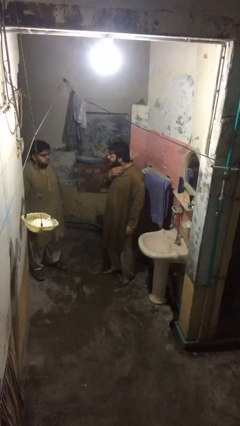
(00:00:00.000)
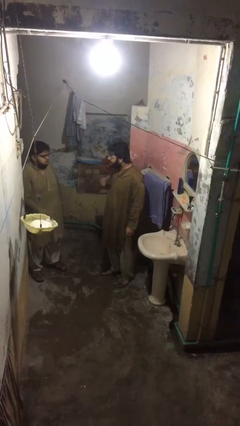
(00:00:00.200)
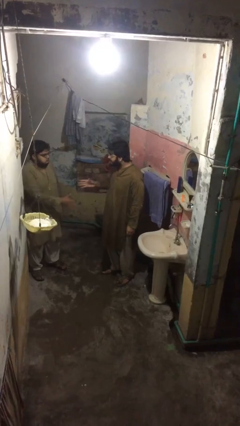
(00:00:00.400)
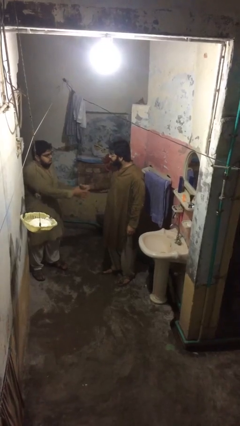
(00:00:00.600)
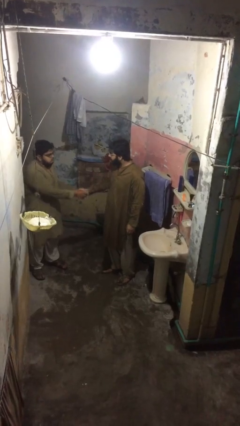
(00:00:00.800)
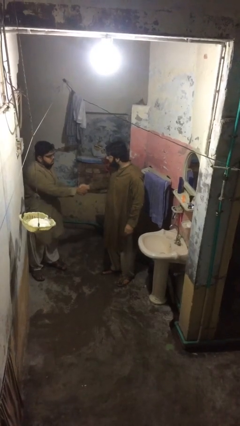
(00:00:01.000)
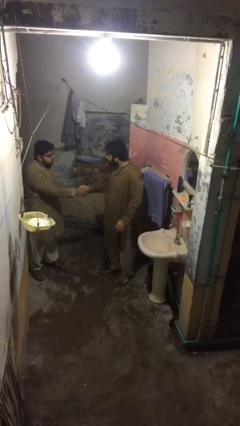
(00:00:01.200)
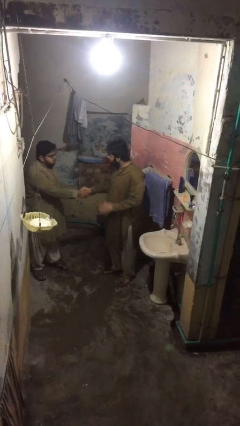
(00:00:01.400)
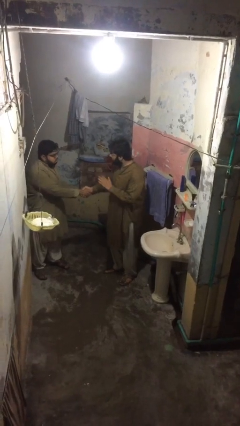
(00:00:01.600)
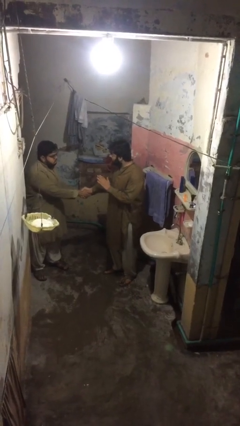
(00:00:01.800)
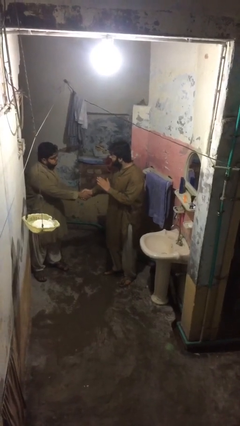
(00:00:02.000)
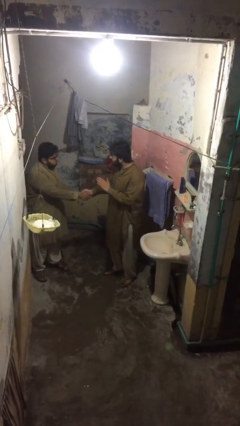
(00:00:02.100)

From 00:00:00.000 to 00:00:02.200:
person shakes hand

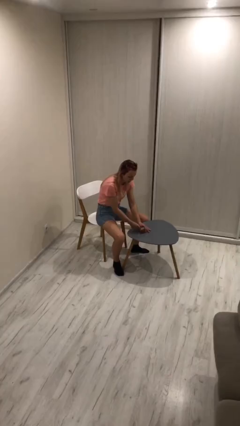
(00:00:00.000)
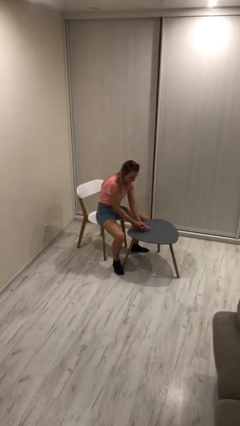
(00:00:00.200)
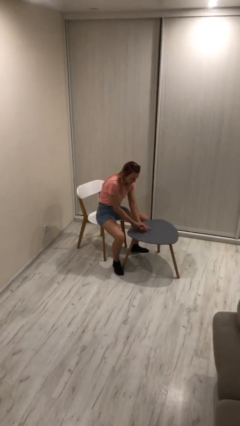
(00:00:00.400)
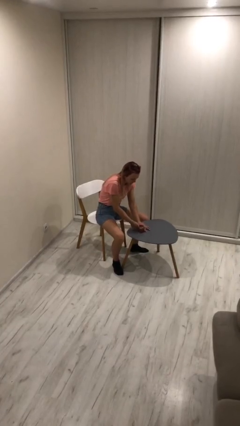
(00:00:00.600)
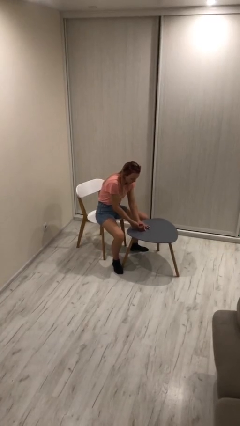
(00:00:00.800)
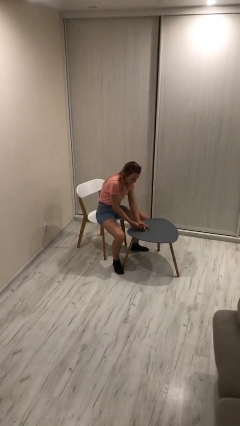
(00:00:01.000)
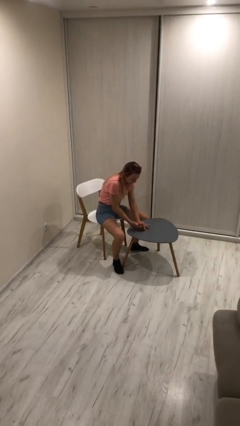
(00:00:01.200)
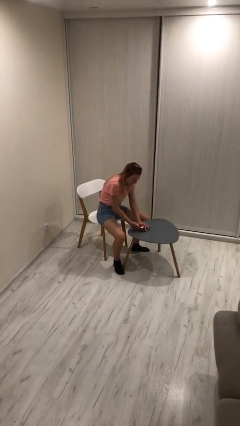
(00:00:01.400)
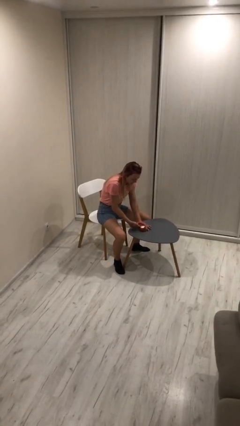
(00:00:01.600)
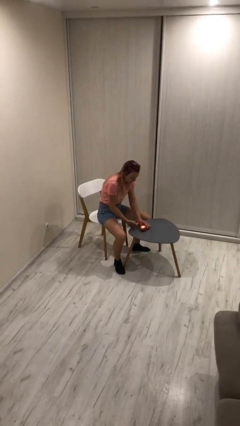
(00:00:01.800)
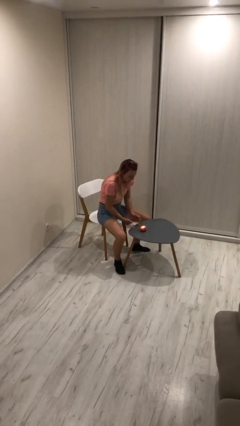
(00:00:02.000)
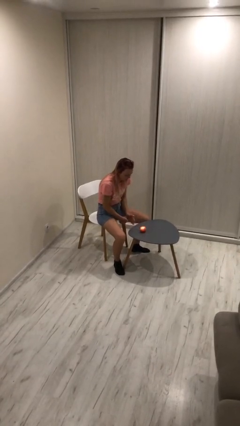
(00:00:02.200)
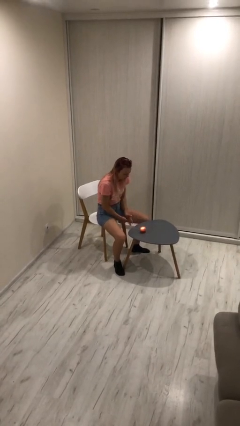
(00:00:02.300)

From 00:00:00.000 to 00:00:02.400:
person lights candle

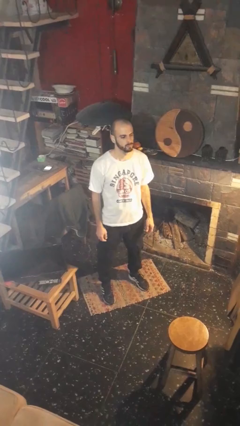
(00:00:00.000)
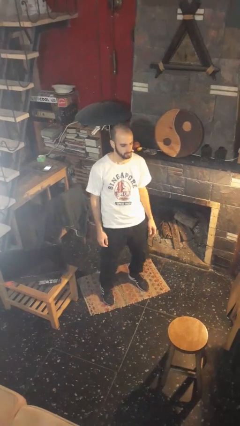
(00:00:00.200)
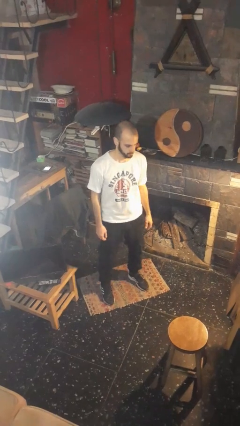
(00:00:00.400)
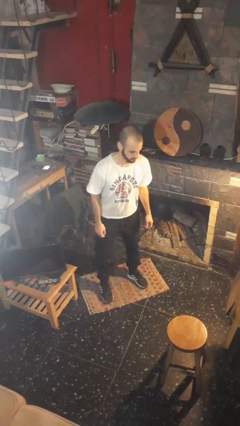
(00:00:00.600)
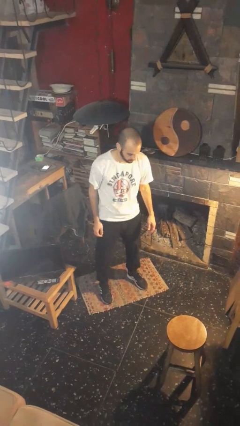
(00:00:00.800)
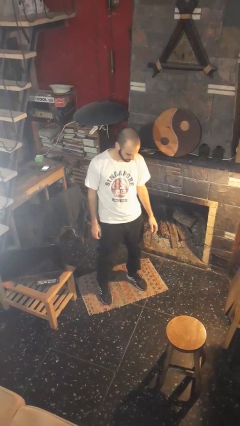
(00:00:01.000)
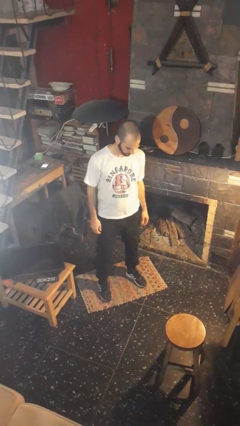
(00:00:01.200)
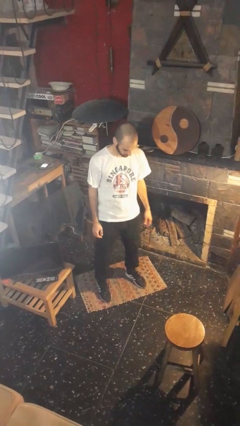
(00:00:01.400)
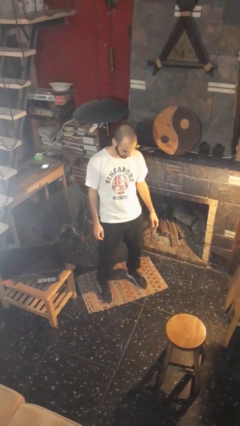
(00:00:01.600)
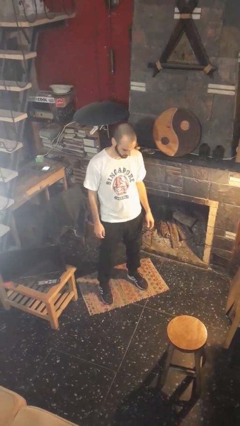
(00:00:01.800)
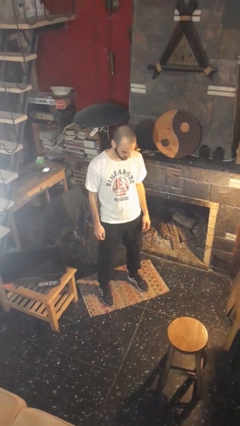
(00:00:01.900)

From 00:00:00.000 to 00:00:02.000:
person wiggles hips

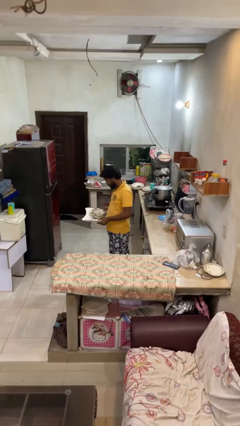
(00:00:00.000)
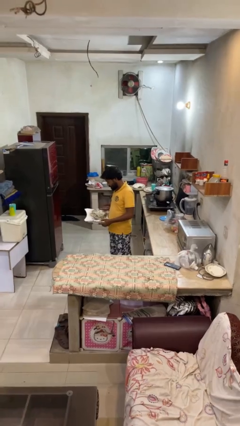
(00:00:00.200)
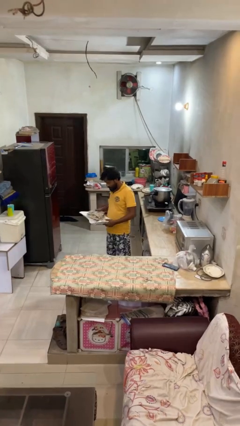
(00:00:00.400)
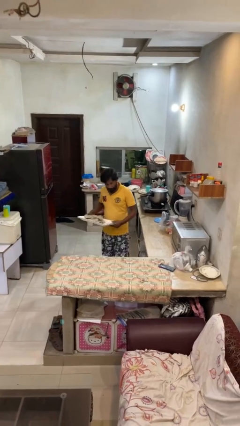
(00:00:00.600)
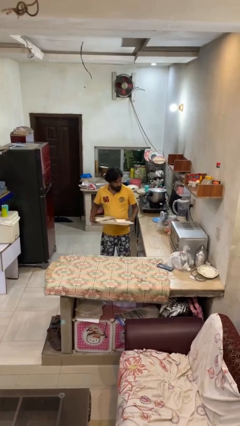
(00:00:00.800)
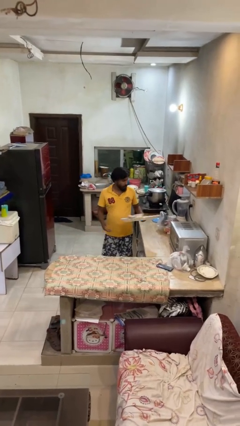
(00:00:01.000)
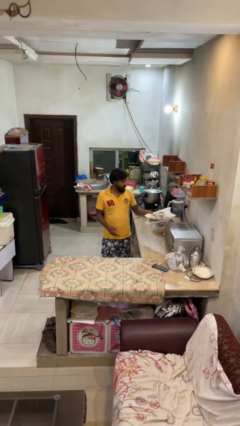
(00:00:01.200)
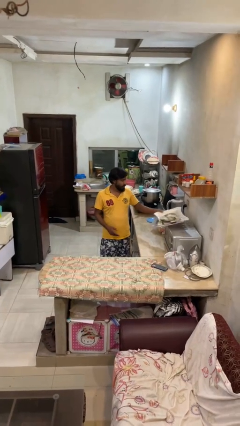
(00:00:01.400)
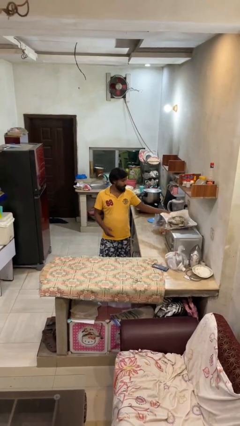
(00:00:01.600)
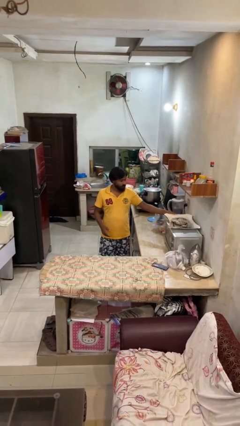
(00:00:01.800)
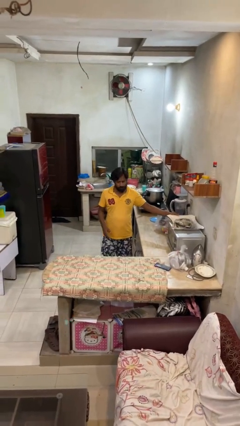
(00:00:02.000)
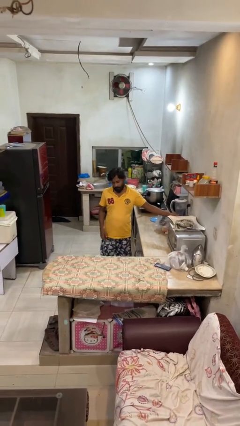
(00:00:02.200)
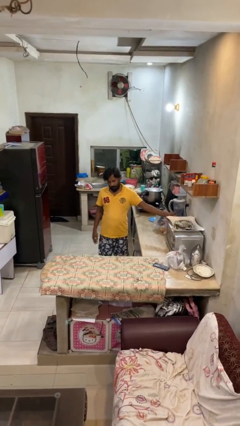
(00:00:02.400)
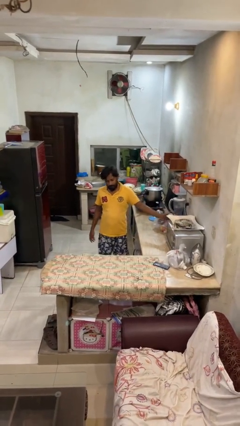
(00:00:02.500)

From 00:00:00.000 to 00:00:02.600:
person puts down object on countertop

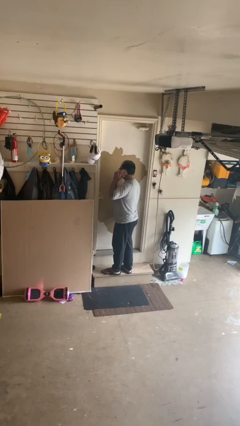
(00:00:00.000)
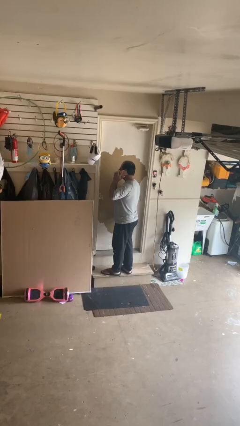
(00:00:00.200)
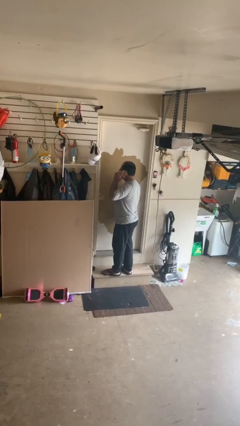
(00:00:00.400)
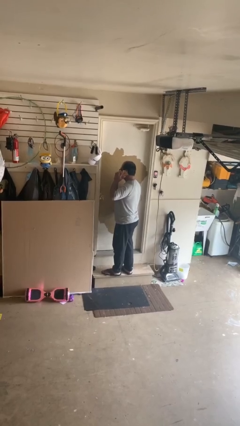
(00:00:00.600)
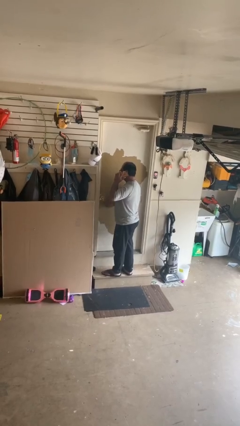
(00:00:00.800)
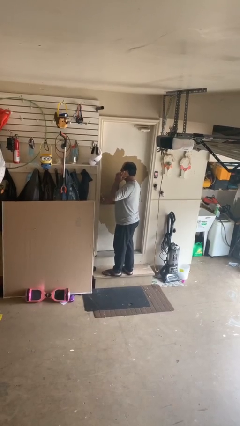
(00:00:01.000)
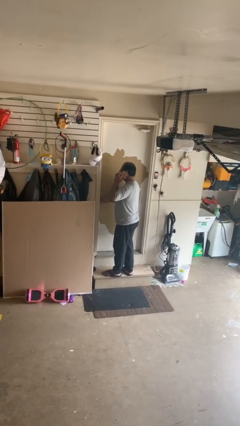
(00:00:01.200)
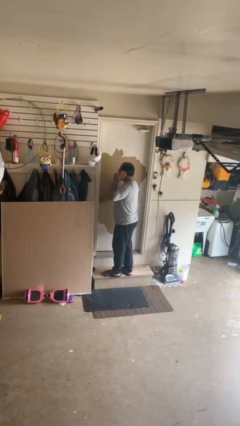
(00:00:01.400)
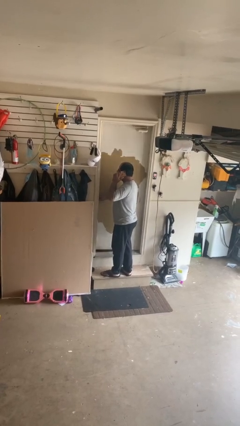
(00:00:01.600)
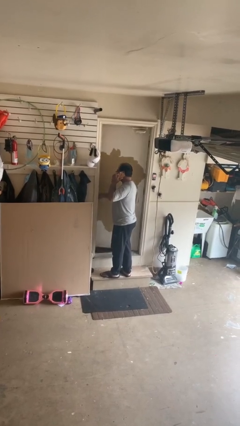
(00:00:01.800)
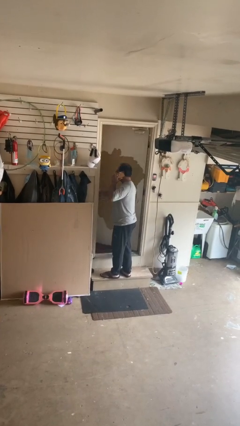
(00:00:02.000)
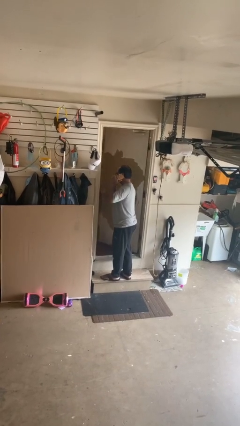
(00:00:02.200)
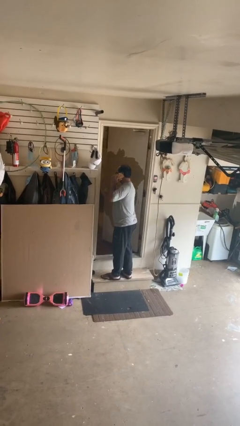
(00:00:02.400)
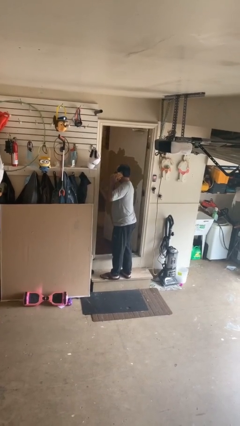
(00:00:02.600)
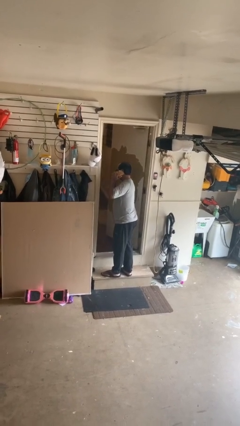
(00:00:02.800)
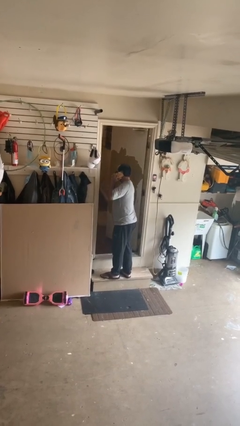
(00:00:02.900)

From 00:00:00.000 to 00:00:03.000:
person opens facility door

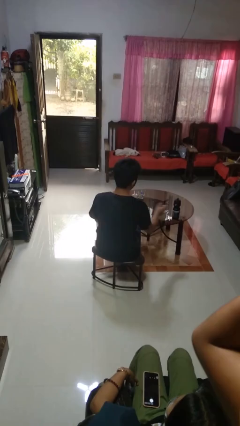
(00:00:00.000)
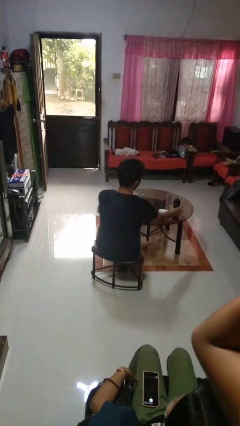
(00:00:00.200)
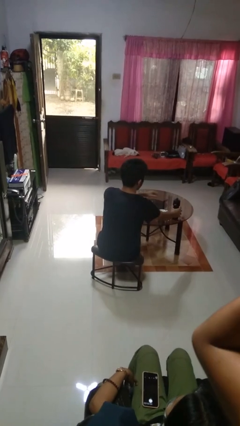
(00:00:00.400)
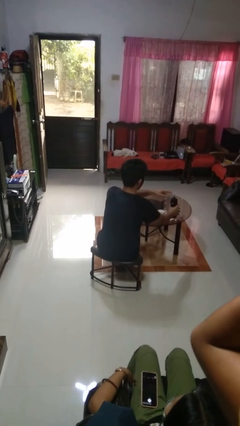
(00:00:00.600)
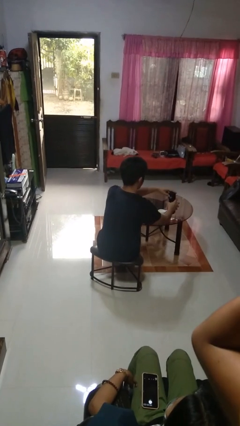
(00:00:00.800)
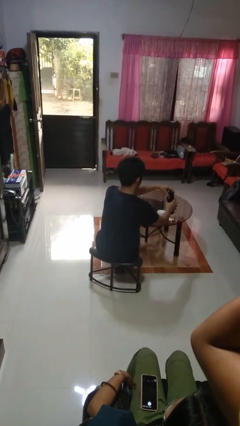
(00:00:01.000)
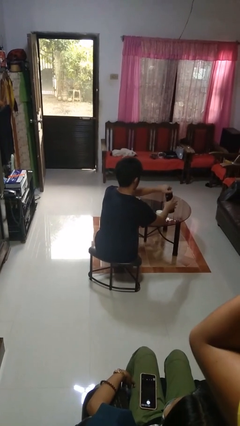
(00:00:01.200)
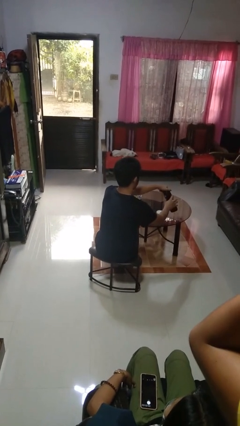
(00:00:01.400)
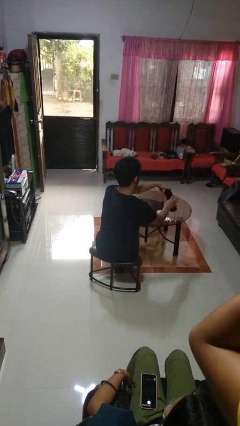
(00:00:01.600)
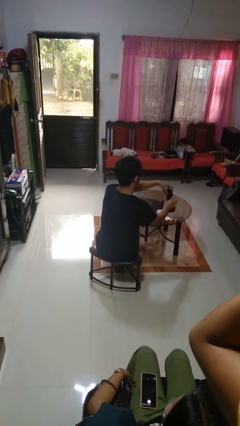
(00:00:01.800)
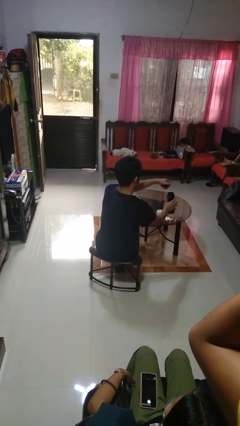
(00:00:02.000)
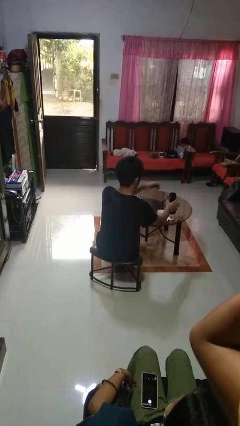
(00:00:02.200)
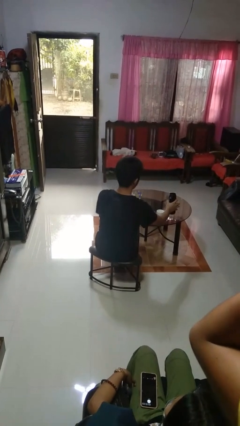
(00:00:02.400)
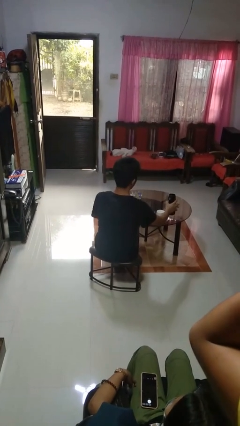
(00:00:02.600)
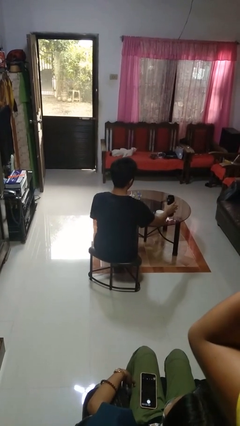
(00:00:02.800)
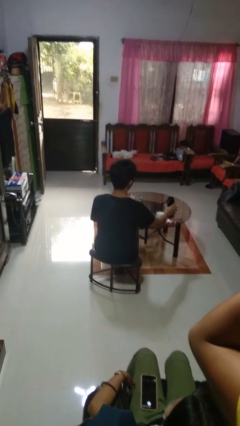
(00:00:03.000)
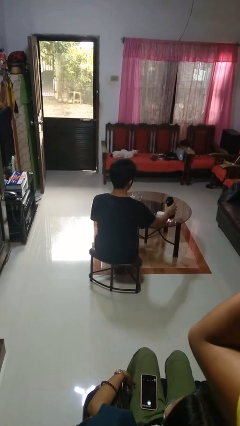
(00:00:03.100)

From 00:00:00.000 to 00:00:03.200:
person unscrews lid from bottle

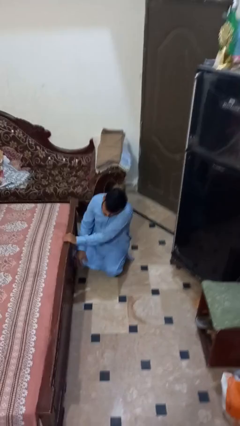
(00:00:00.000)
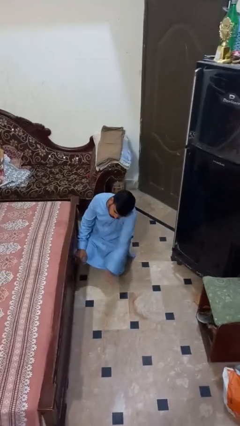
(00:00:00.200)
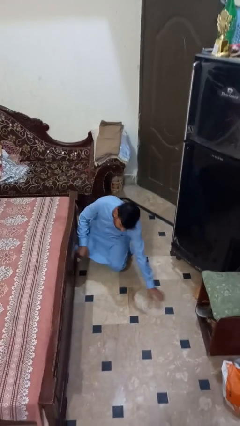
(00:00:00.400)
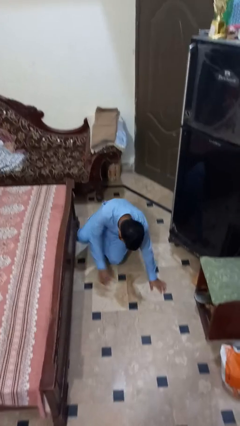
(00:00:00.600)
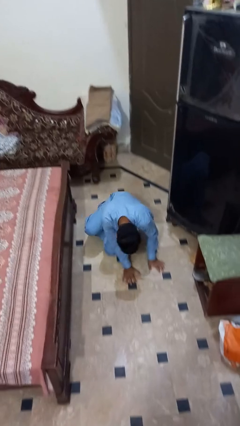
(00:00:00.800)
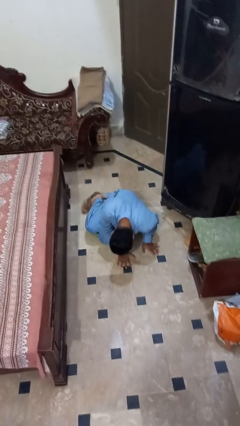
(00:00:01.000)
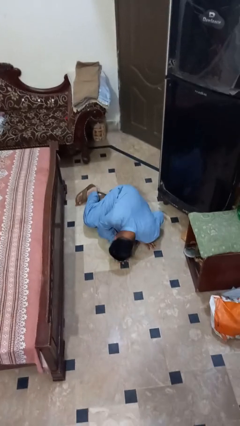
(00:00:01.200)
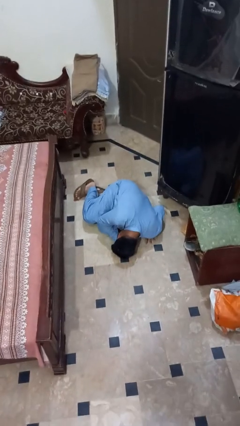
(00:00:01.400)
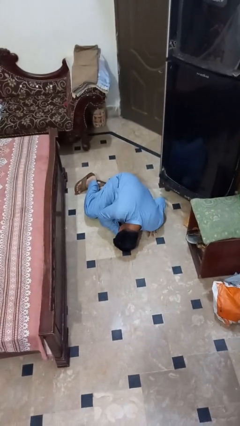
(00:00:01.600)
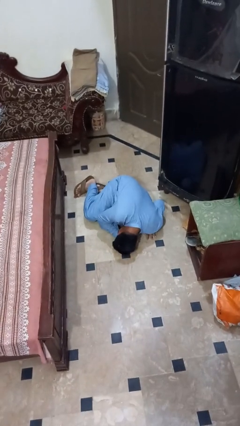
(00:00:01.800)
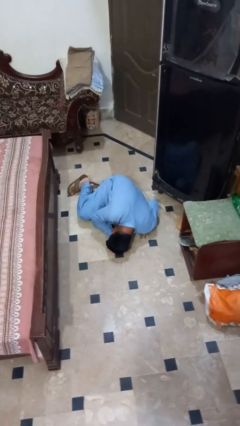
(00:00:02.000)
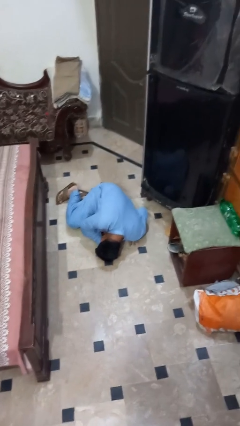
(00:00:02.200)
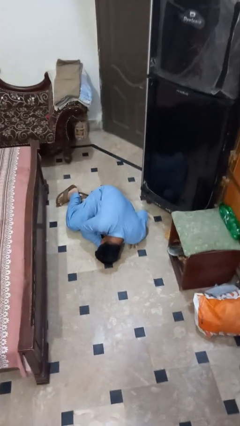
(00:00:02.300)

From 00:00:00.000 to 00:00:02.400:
person lies down on floor
